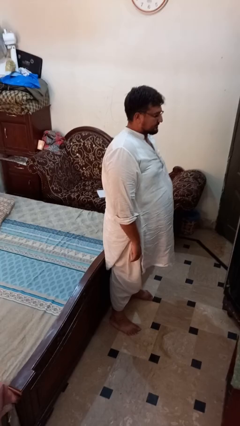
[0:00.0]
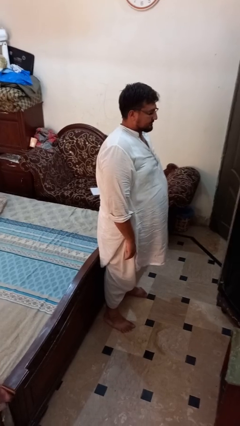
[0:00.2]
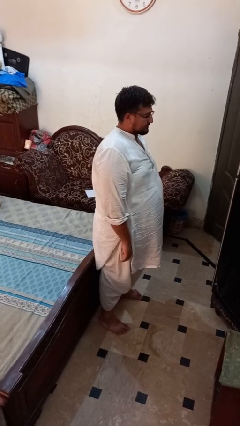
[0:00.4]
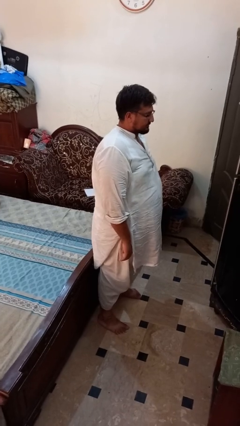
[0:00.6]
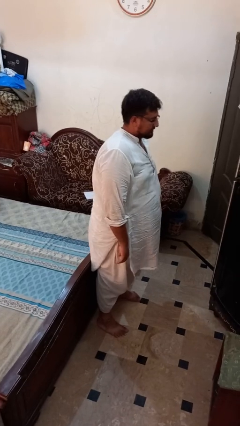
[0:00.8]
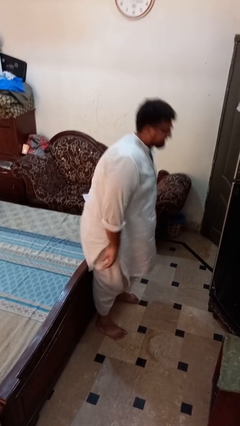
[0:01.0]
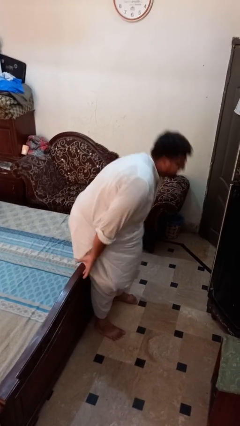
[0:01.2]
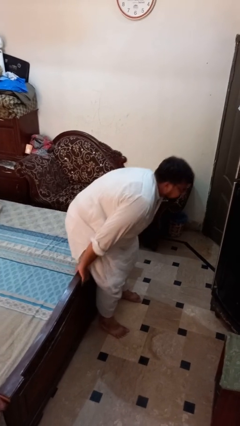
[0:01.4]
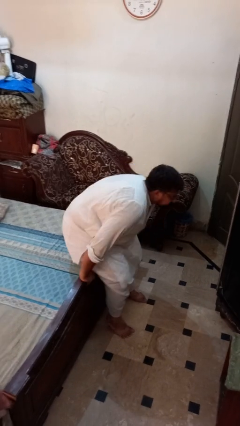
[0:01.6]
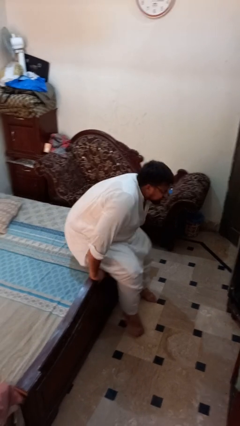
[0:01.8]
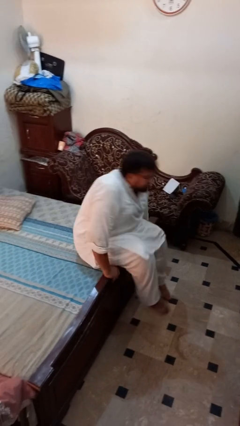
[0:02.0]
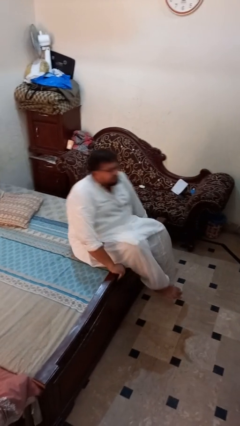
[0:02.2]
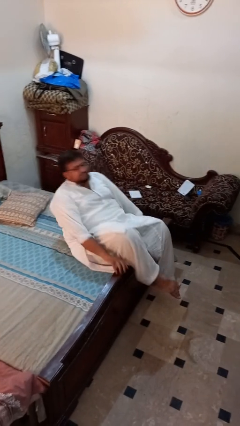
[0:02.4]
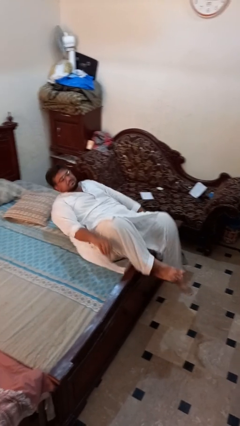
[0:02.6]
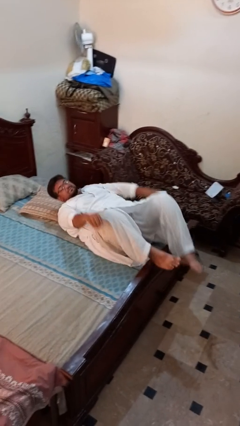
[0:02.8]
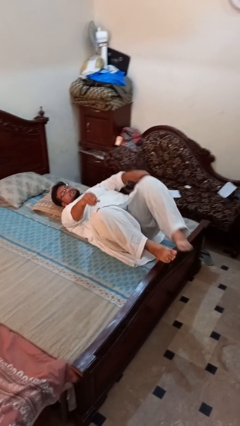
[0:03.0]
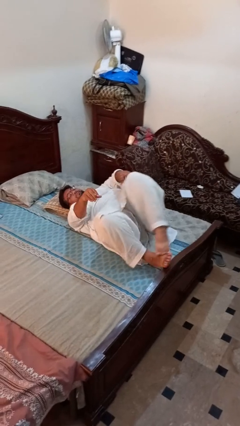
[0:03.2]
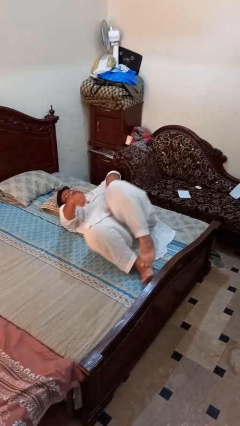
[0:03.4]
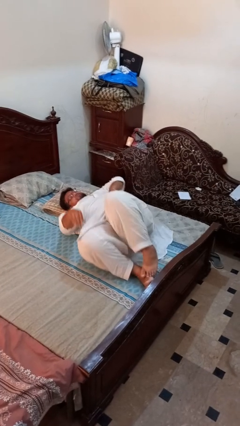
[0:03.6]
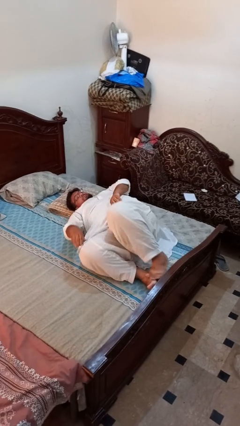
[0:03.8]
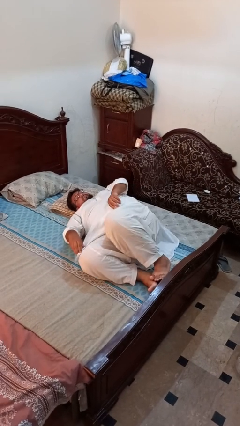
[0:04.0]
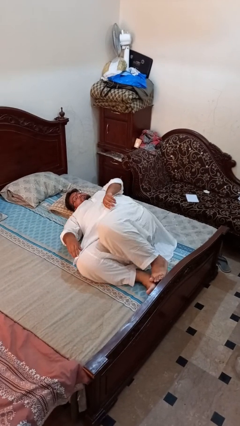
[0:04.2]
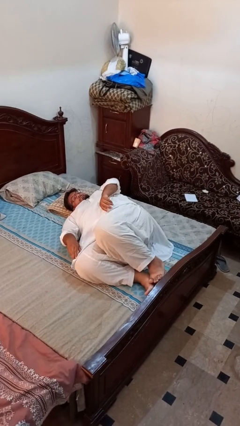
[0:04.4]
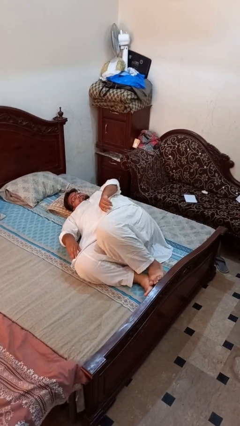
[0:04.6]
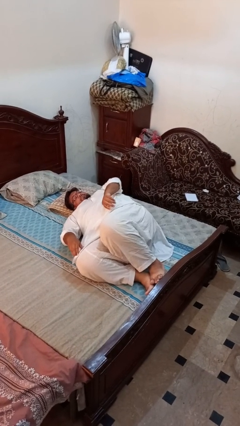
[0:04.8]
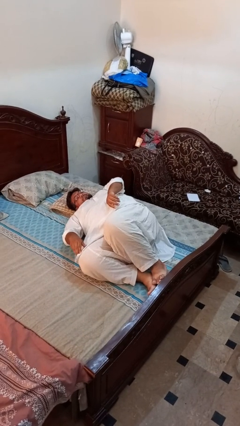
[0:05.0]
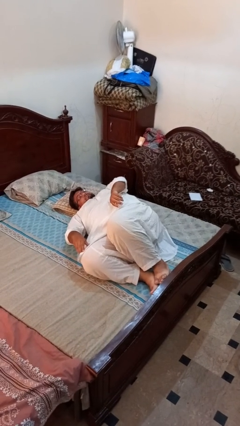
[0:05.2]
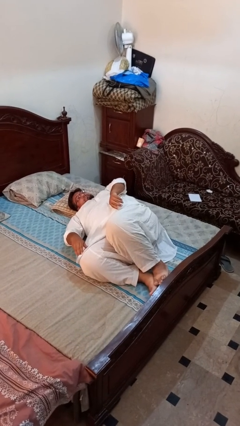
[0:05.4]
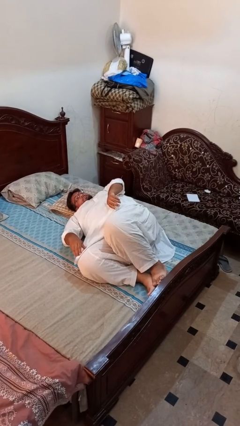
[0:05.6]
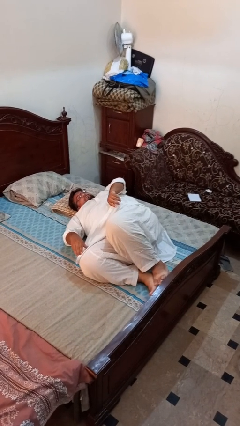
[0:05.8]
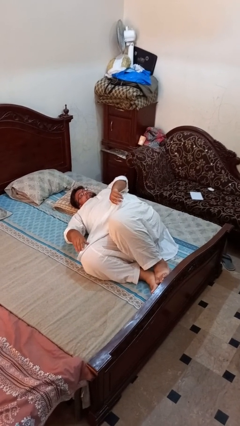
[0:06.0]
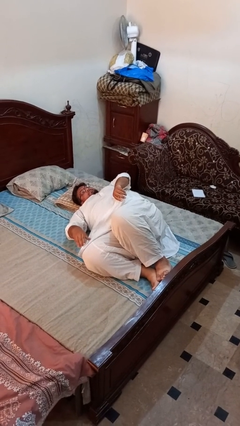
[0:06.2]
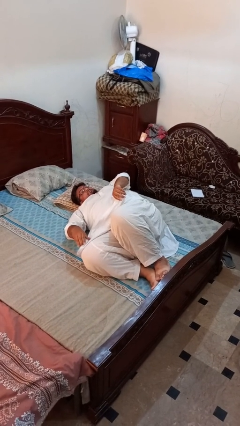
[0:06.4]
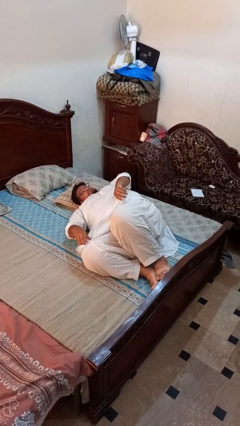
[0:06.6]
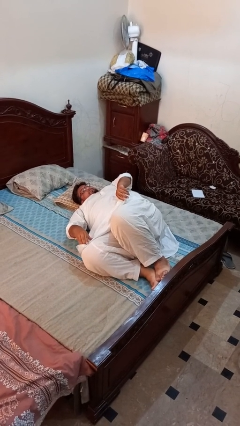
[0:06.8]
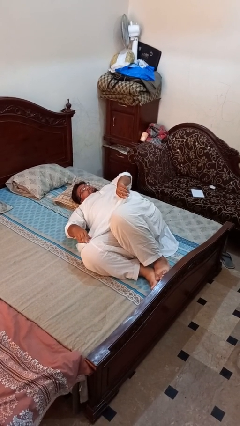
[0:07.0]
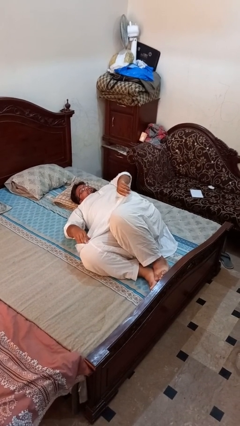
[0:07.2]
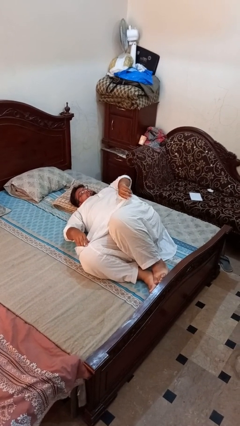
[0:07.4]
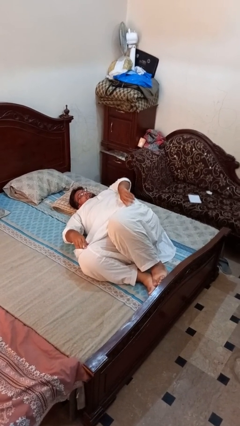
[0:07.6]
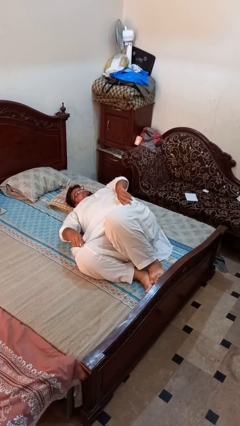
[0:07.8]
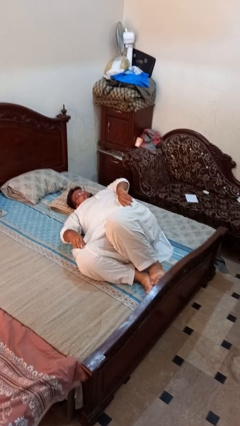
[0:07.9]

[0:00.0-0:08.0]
person lies down on bed

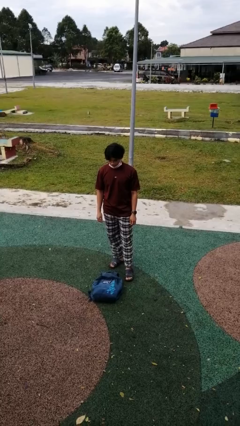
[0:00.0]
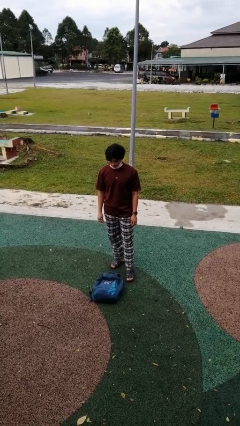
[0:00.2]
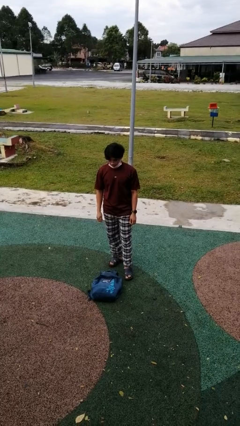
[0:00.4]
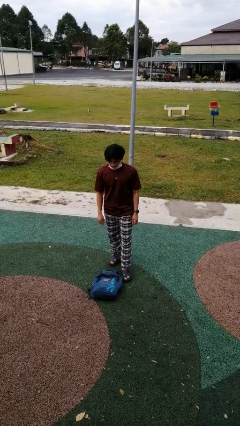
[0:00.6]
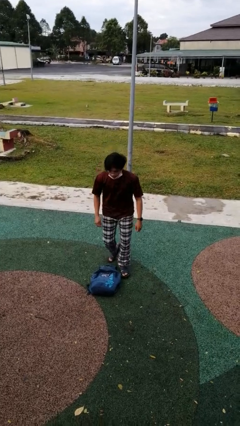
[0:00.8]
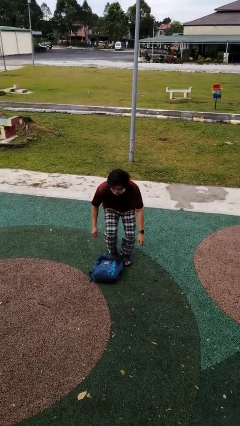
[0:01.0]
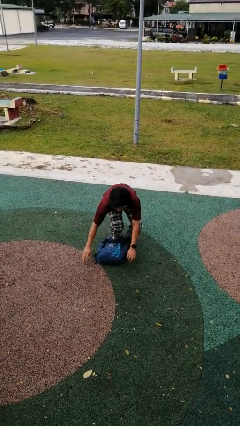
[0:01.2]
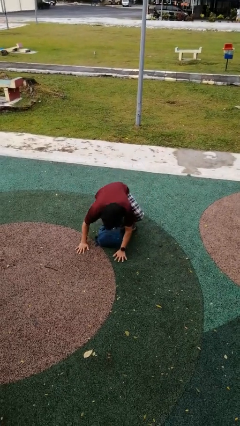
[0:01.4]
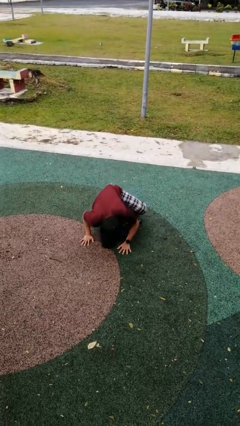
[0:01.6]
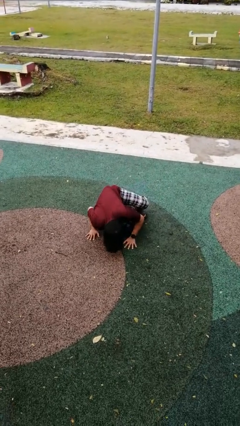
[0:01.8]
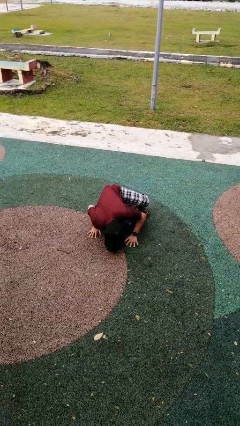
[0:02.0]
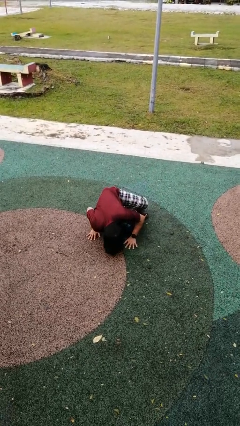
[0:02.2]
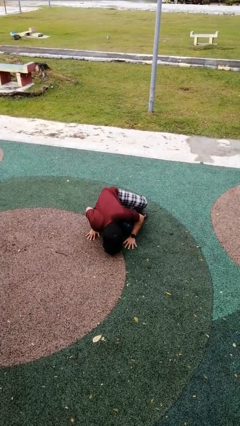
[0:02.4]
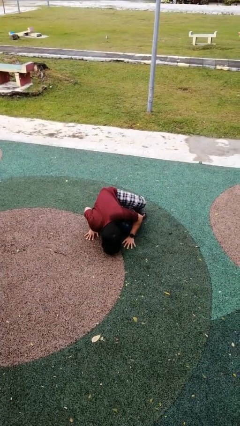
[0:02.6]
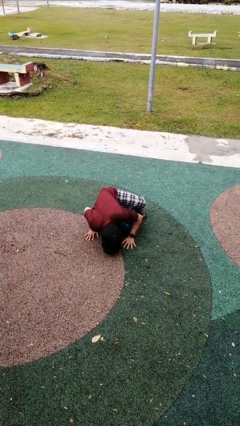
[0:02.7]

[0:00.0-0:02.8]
person trips on object on floor

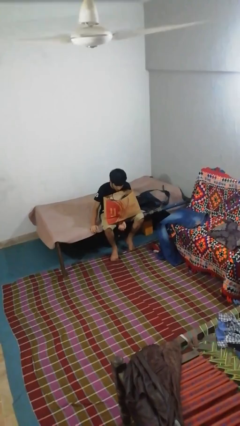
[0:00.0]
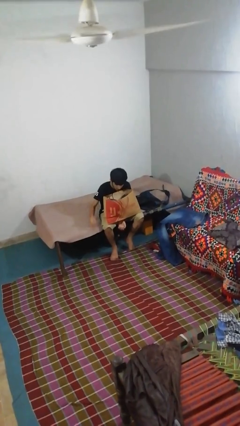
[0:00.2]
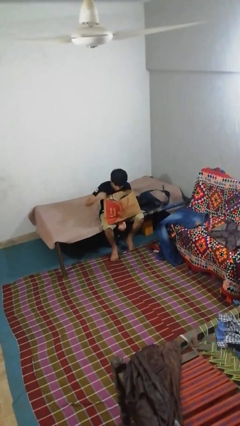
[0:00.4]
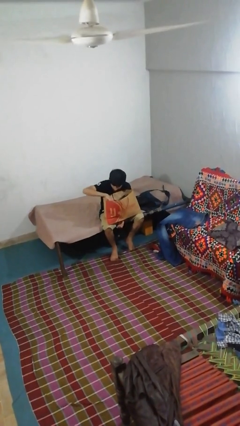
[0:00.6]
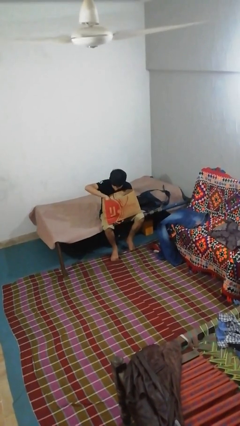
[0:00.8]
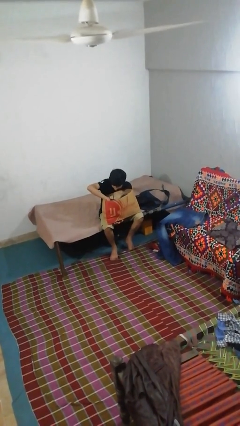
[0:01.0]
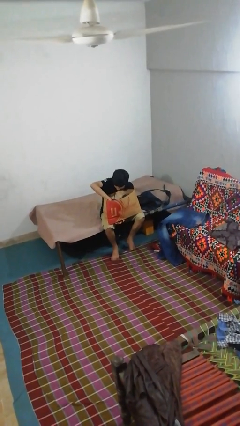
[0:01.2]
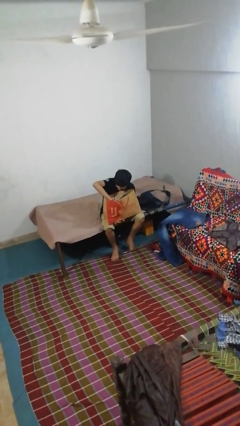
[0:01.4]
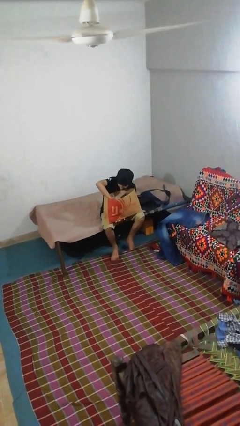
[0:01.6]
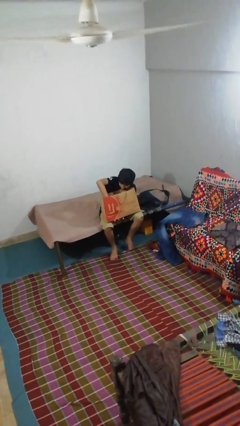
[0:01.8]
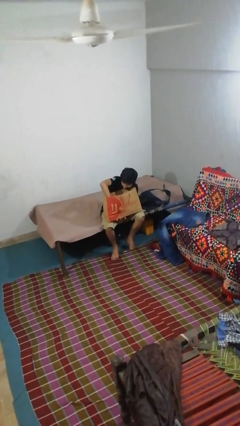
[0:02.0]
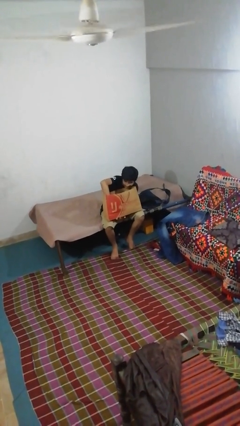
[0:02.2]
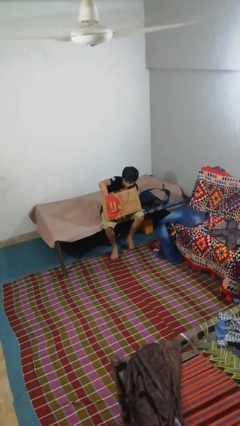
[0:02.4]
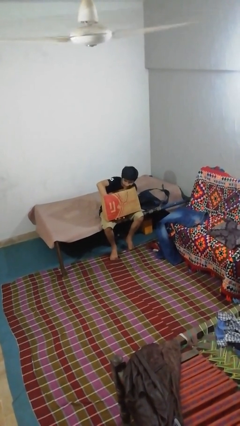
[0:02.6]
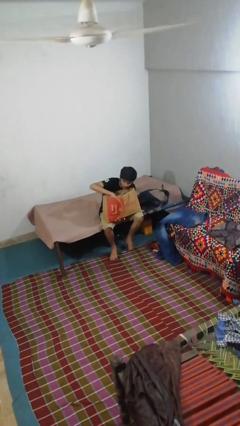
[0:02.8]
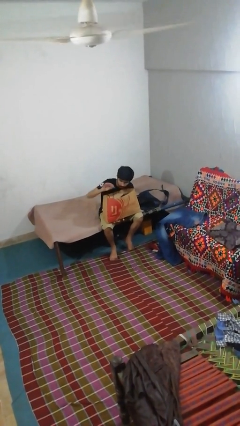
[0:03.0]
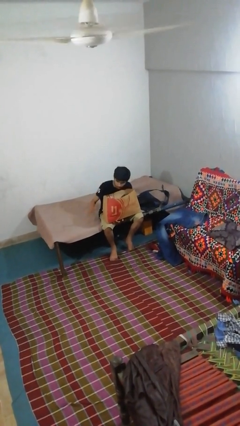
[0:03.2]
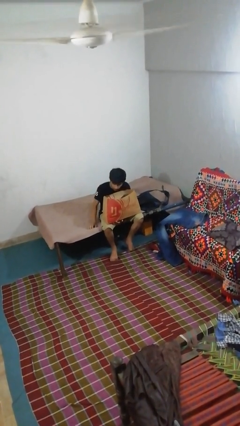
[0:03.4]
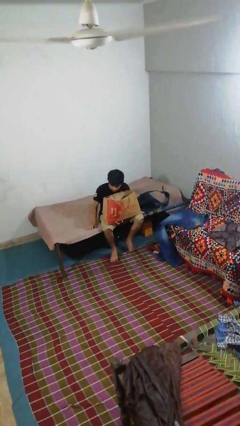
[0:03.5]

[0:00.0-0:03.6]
person searches in bag

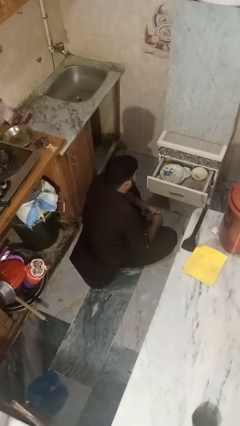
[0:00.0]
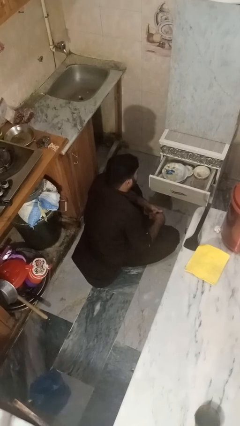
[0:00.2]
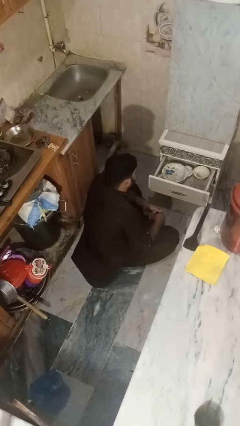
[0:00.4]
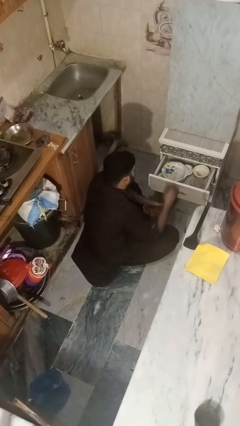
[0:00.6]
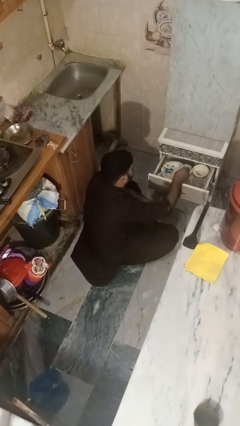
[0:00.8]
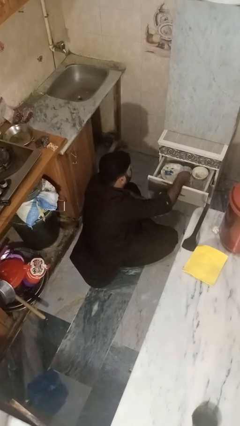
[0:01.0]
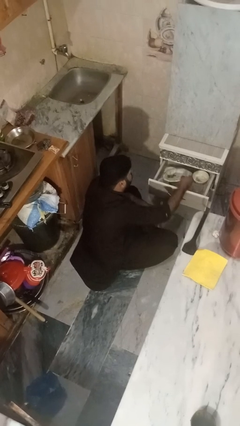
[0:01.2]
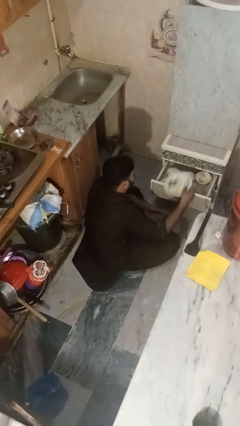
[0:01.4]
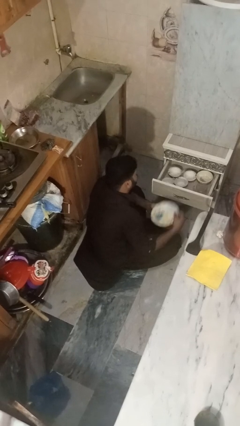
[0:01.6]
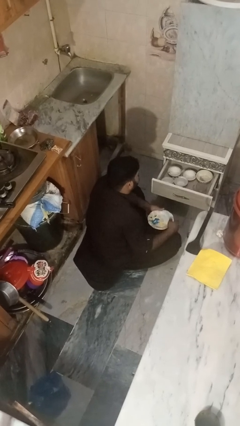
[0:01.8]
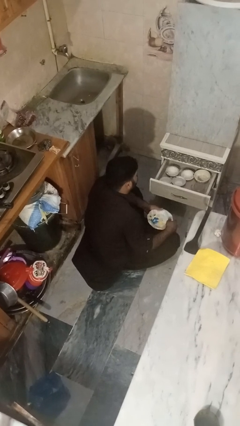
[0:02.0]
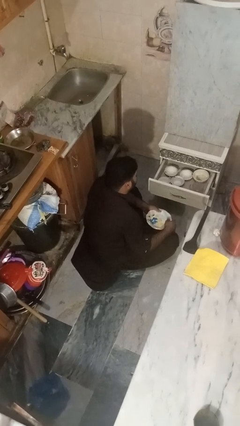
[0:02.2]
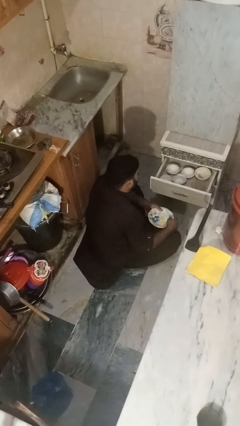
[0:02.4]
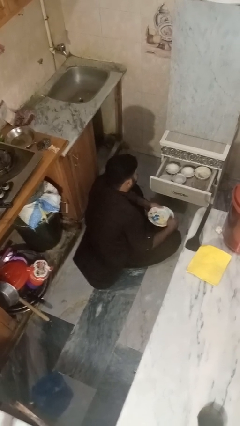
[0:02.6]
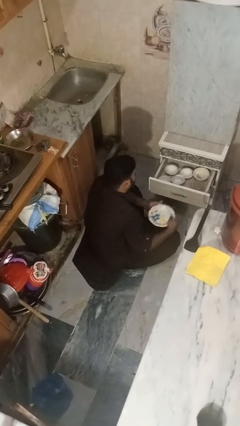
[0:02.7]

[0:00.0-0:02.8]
person takes object from kitchen drawer

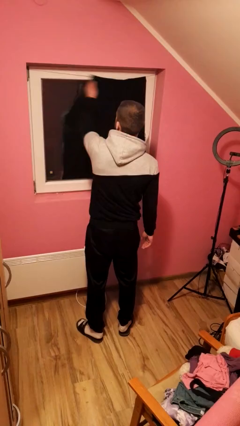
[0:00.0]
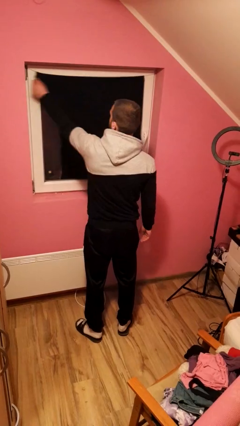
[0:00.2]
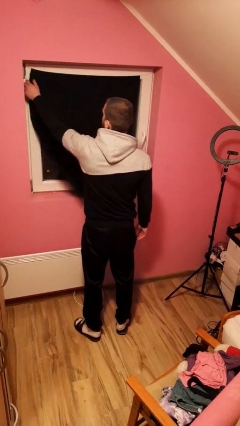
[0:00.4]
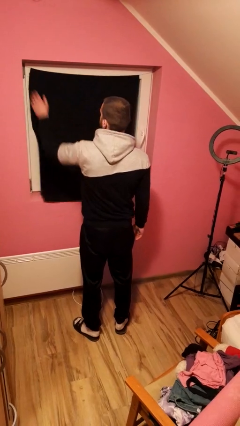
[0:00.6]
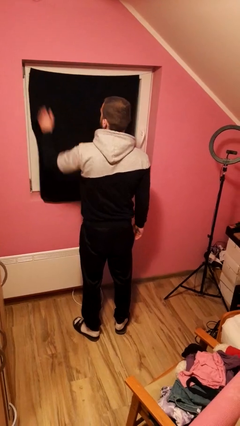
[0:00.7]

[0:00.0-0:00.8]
person closes curtains
